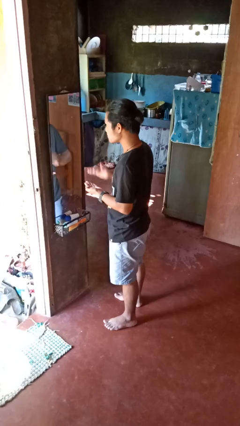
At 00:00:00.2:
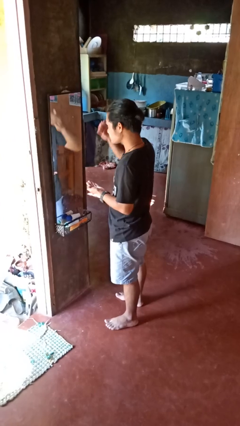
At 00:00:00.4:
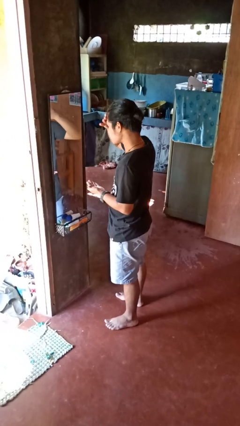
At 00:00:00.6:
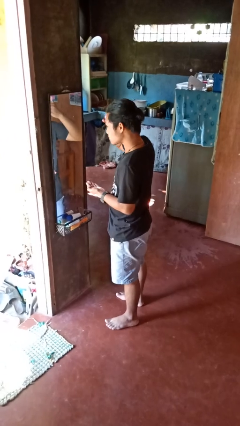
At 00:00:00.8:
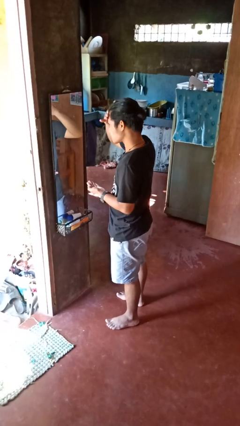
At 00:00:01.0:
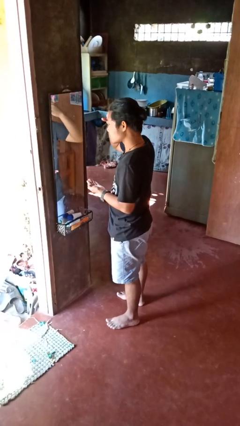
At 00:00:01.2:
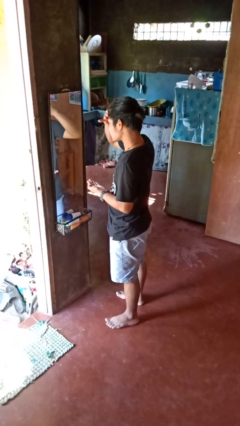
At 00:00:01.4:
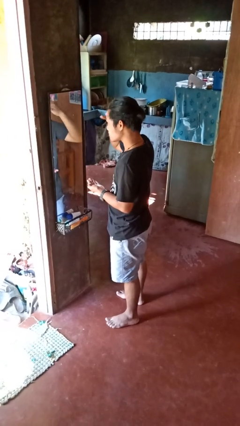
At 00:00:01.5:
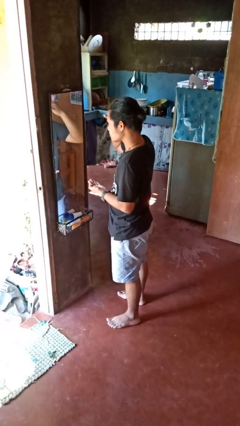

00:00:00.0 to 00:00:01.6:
person applies foundation makeup

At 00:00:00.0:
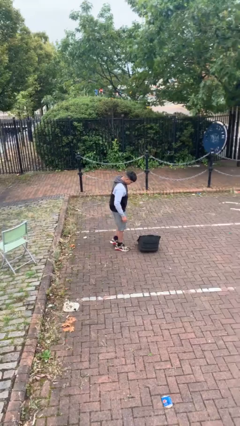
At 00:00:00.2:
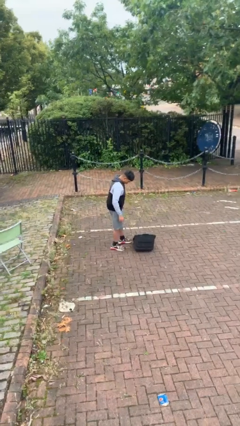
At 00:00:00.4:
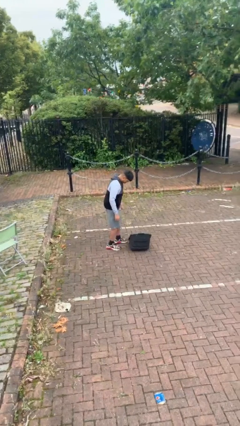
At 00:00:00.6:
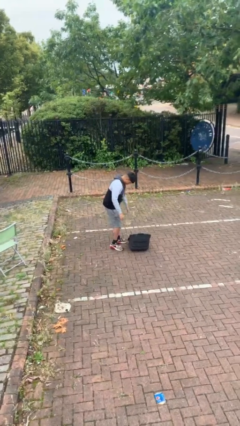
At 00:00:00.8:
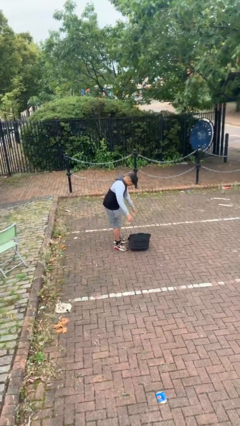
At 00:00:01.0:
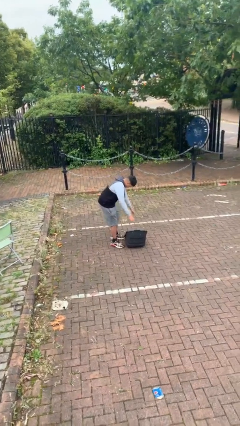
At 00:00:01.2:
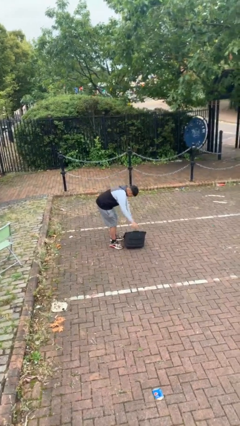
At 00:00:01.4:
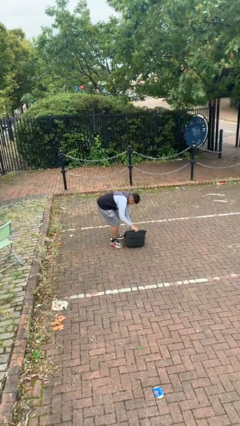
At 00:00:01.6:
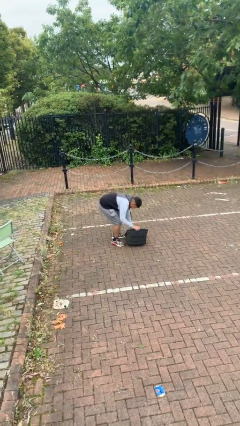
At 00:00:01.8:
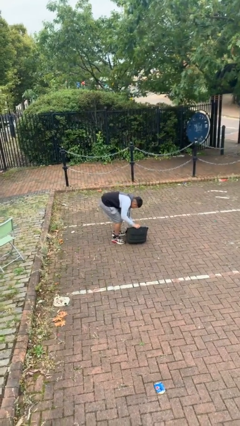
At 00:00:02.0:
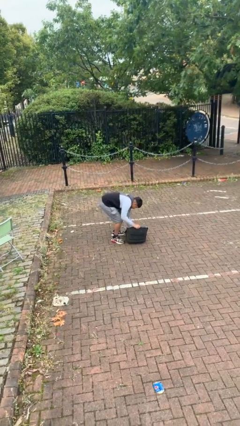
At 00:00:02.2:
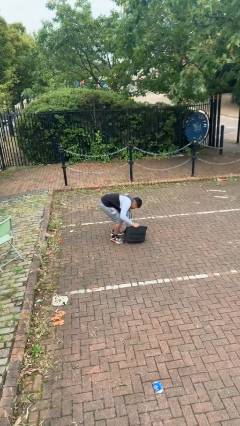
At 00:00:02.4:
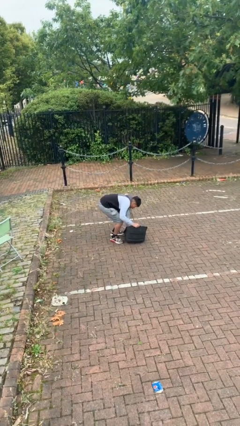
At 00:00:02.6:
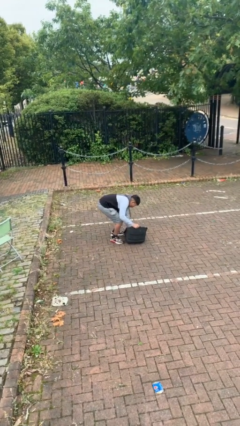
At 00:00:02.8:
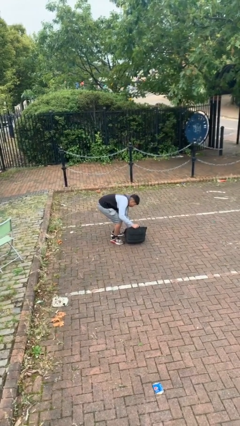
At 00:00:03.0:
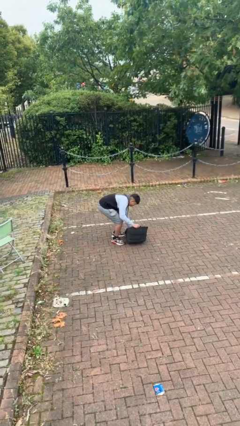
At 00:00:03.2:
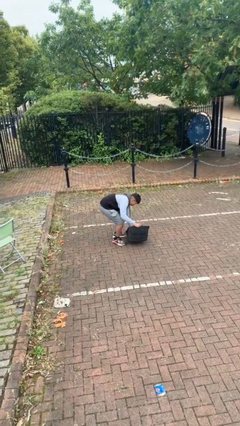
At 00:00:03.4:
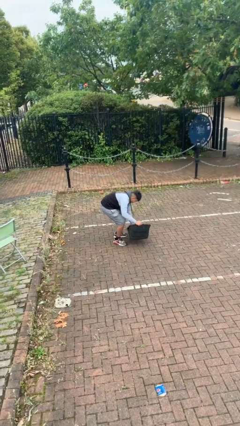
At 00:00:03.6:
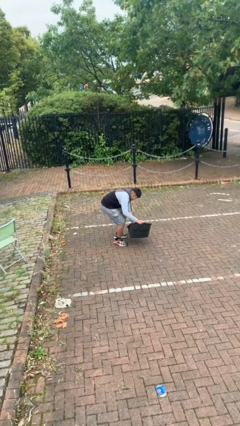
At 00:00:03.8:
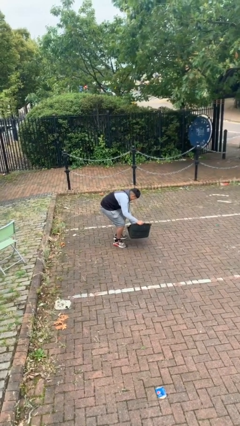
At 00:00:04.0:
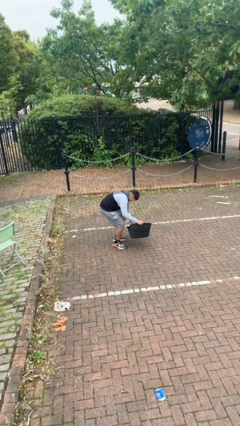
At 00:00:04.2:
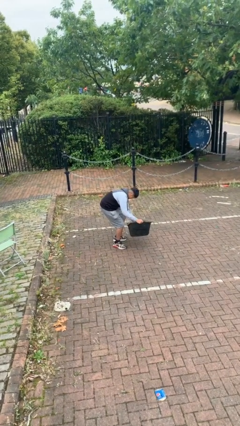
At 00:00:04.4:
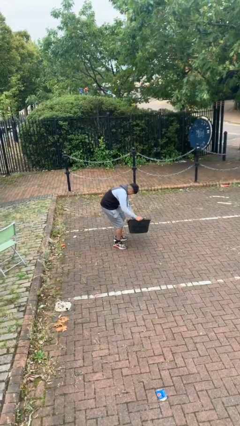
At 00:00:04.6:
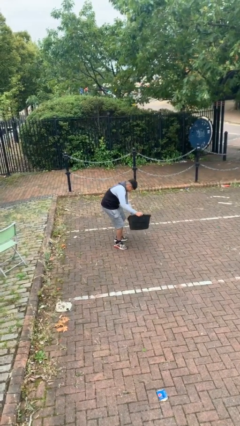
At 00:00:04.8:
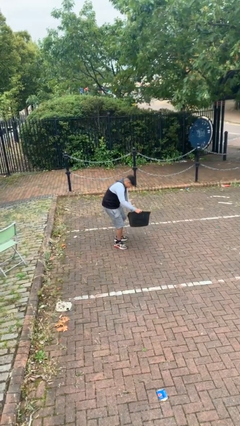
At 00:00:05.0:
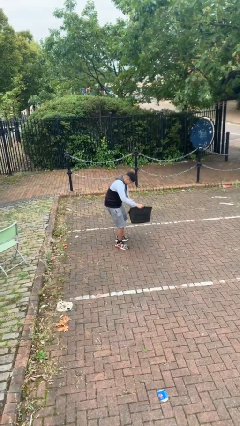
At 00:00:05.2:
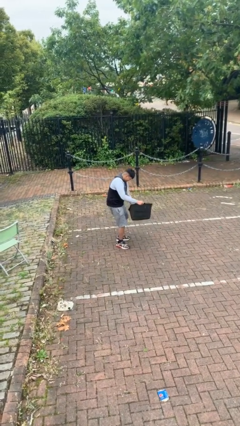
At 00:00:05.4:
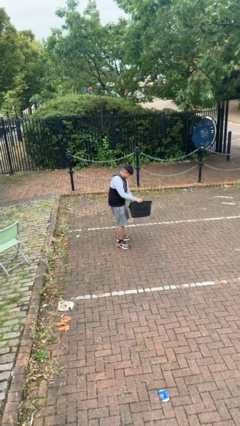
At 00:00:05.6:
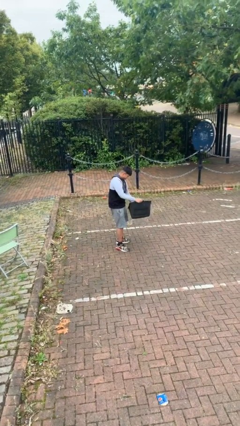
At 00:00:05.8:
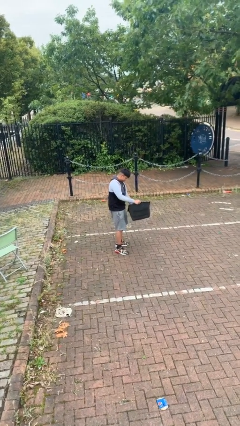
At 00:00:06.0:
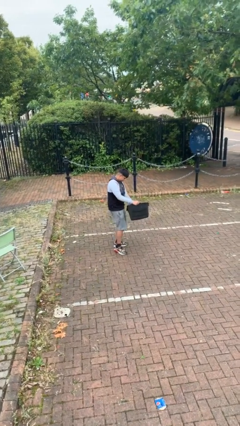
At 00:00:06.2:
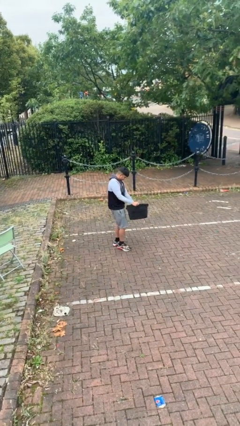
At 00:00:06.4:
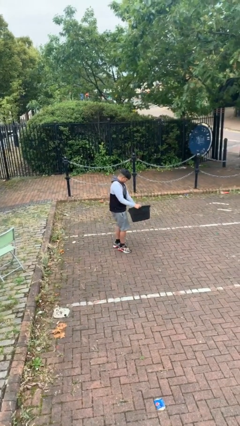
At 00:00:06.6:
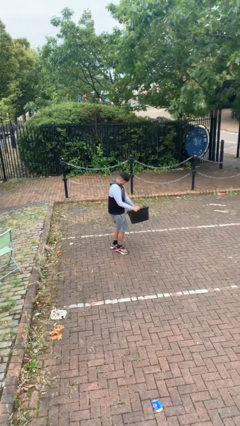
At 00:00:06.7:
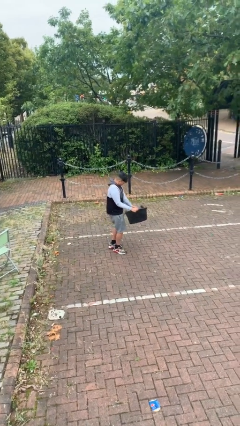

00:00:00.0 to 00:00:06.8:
person picks up object from floor

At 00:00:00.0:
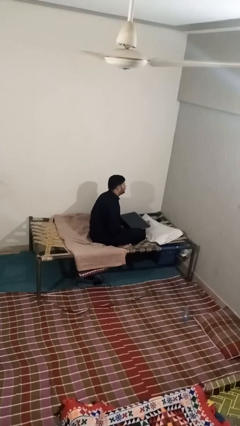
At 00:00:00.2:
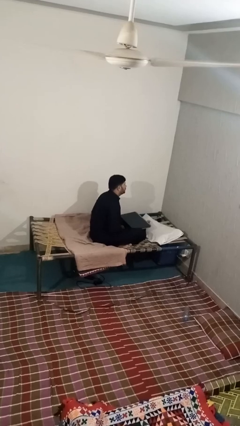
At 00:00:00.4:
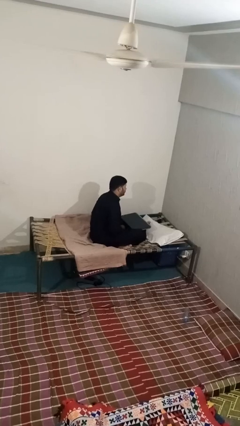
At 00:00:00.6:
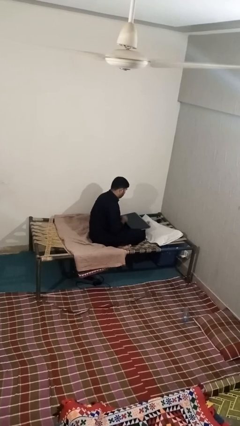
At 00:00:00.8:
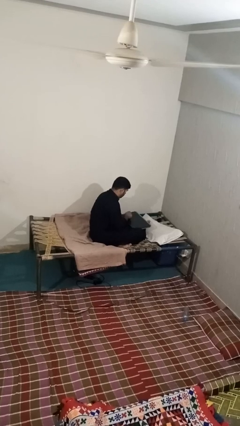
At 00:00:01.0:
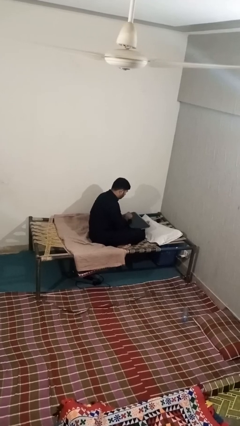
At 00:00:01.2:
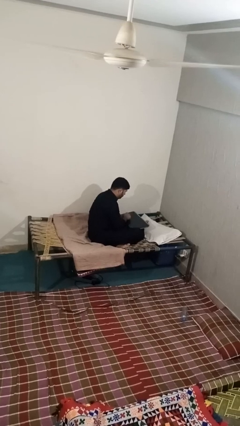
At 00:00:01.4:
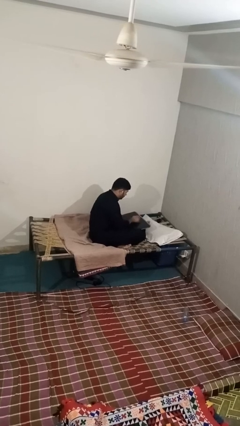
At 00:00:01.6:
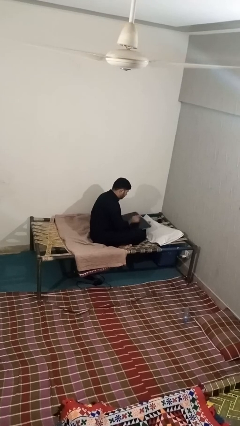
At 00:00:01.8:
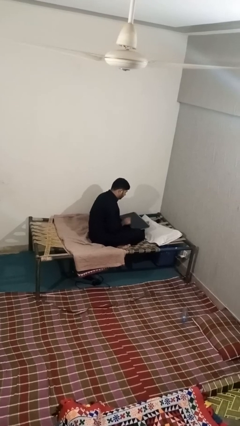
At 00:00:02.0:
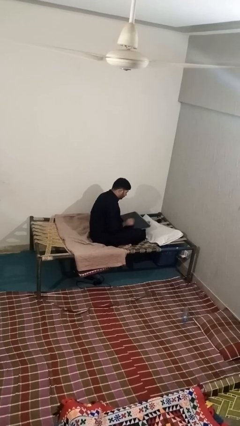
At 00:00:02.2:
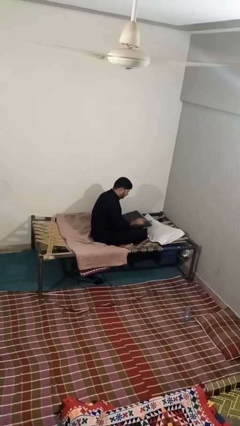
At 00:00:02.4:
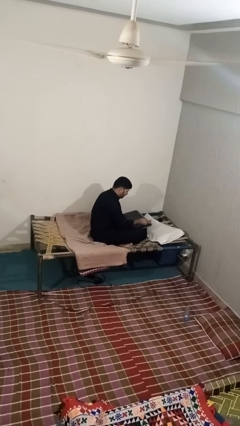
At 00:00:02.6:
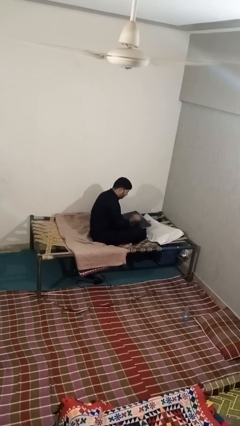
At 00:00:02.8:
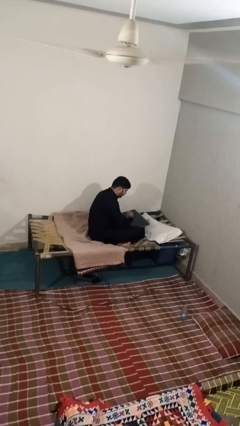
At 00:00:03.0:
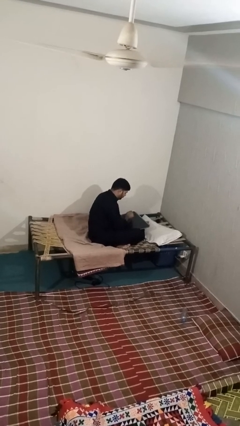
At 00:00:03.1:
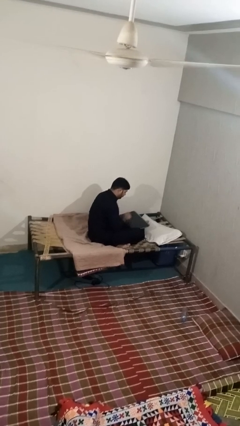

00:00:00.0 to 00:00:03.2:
person interacts with tablet

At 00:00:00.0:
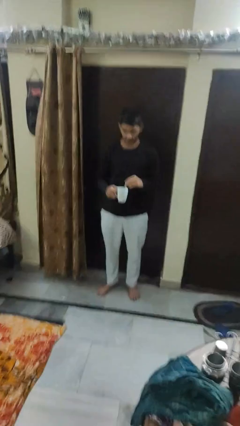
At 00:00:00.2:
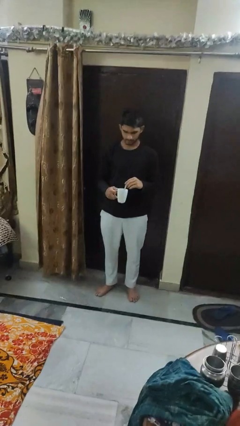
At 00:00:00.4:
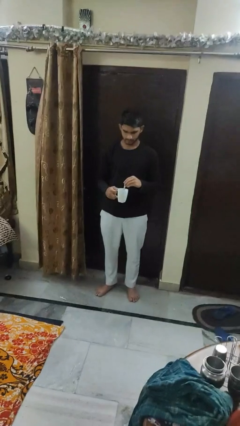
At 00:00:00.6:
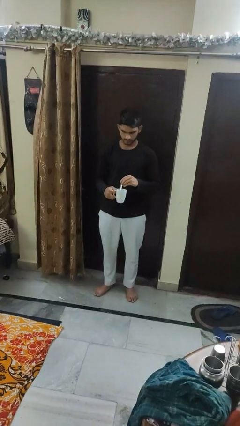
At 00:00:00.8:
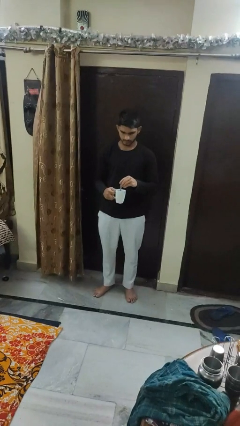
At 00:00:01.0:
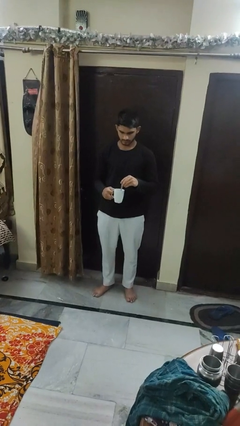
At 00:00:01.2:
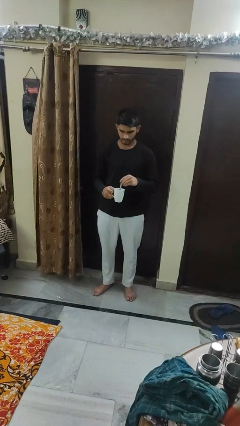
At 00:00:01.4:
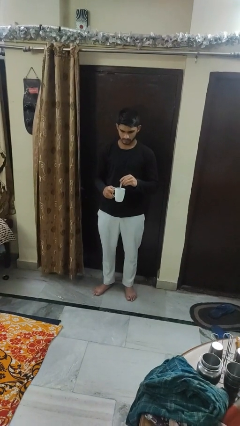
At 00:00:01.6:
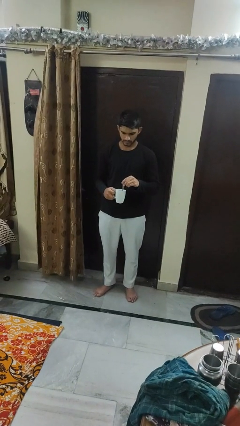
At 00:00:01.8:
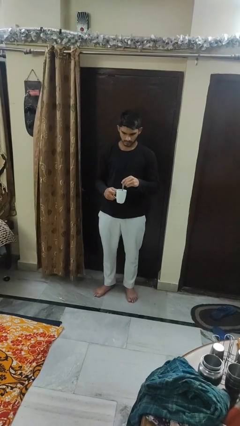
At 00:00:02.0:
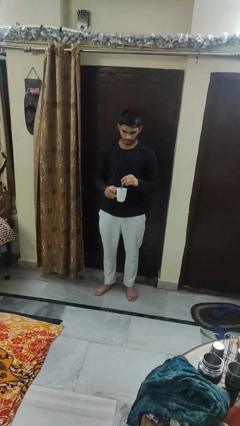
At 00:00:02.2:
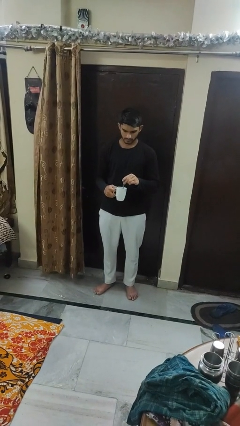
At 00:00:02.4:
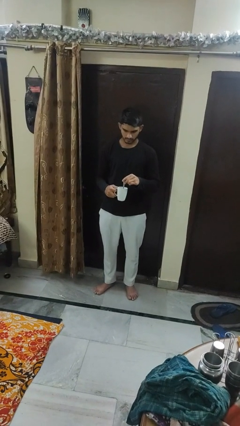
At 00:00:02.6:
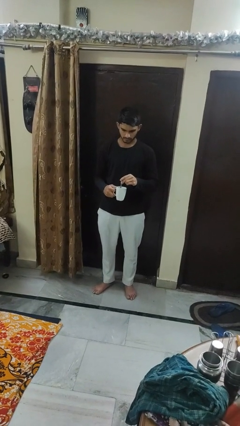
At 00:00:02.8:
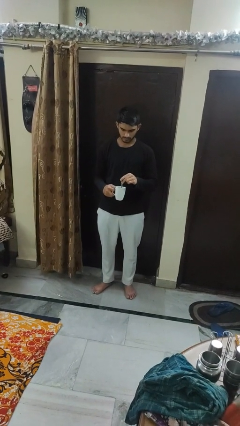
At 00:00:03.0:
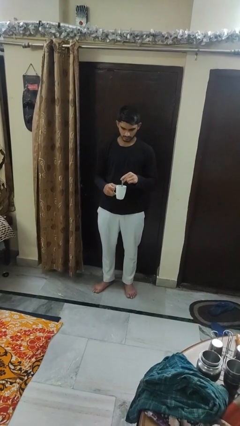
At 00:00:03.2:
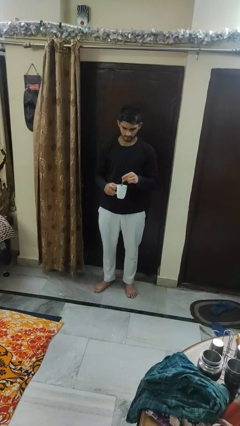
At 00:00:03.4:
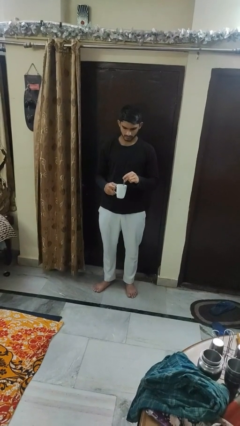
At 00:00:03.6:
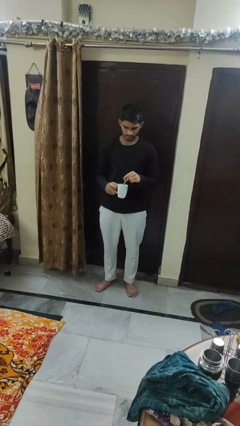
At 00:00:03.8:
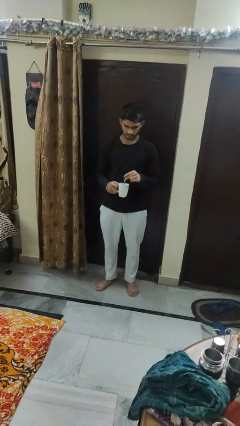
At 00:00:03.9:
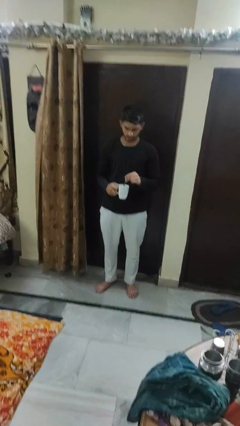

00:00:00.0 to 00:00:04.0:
person stirs mug

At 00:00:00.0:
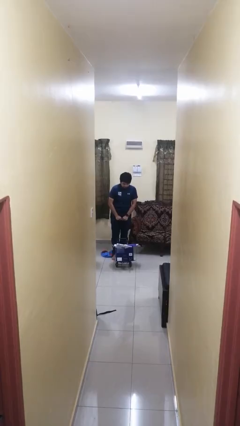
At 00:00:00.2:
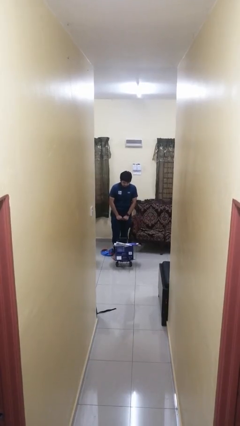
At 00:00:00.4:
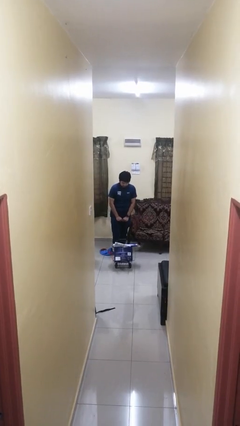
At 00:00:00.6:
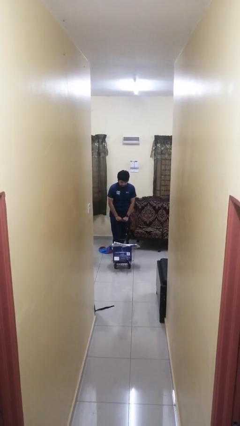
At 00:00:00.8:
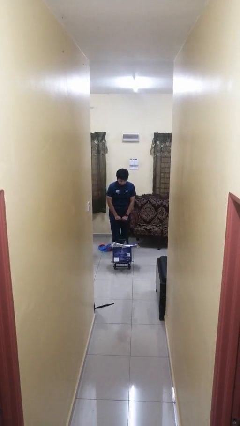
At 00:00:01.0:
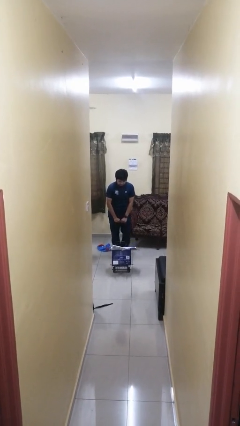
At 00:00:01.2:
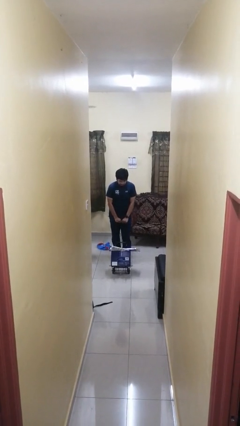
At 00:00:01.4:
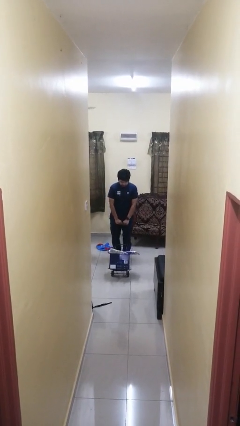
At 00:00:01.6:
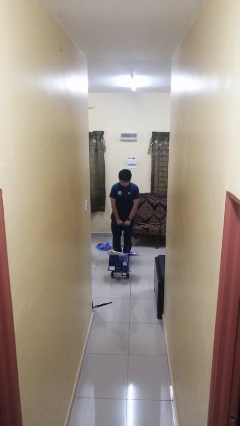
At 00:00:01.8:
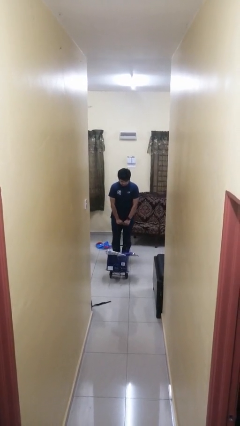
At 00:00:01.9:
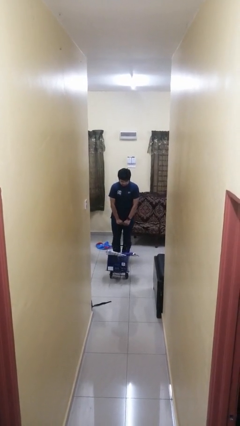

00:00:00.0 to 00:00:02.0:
person pushes wheeled cart
